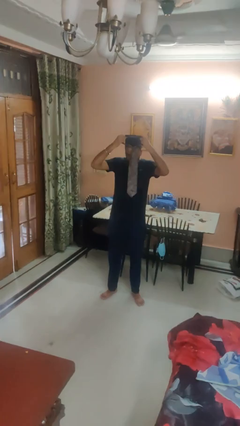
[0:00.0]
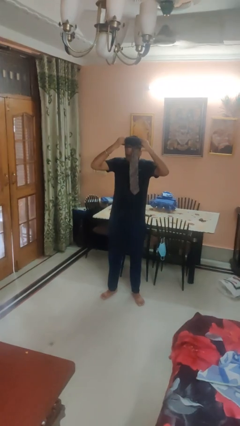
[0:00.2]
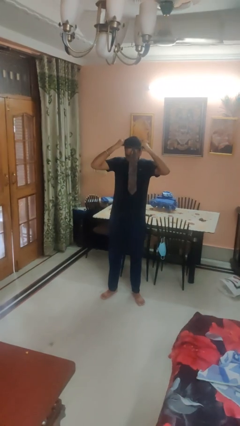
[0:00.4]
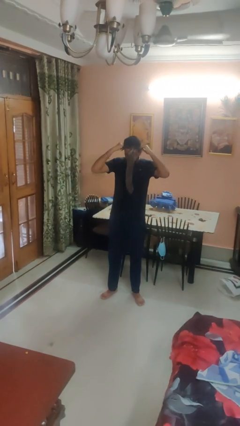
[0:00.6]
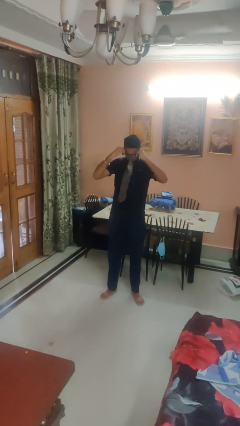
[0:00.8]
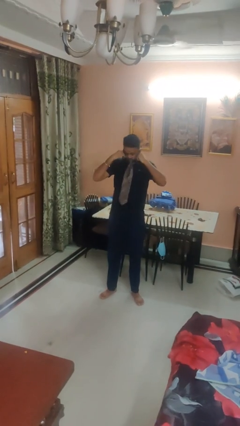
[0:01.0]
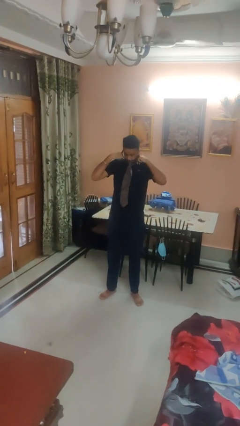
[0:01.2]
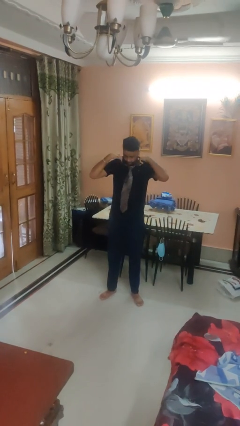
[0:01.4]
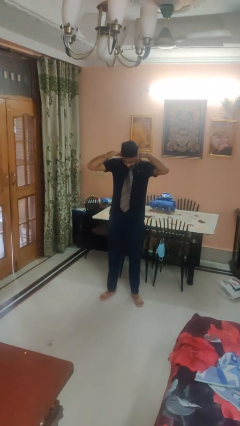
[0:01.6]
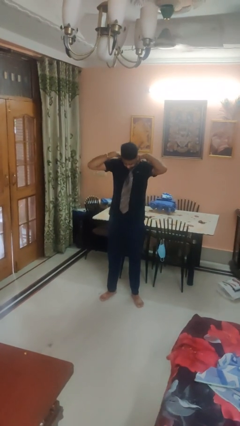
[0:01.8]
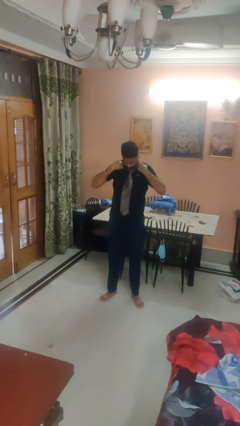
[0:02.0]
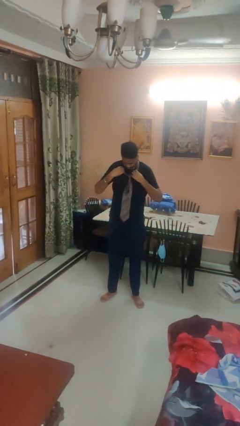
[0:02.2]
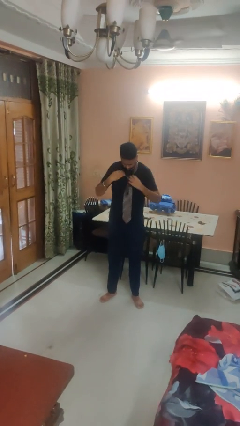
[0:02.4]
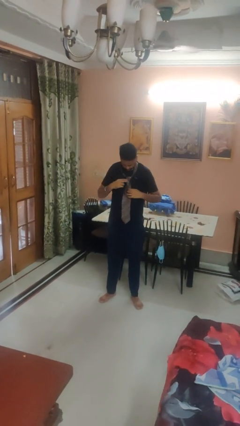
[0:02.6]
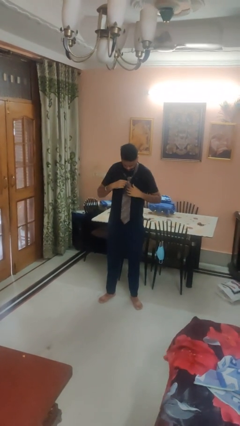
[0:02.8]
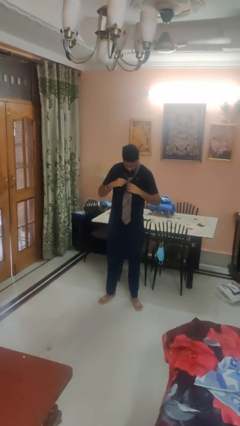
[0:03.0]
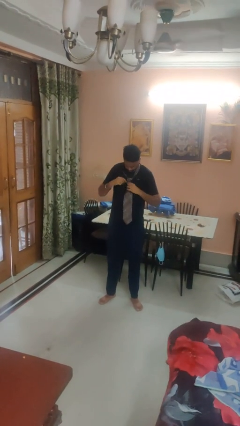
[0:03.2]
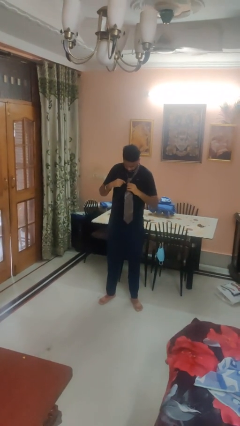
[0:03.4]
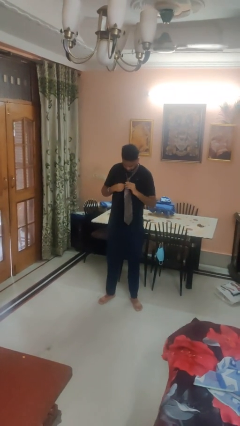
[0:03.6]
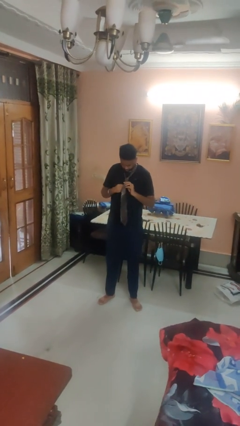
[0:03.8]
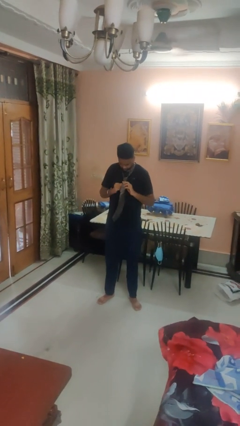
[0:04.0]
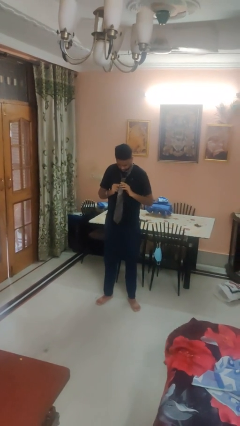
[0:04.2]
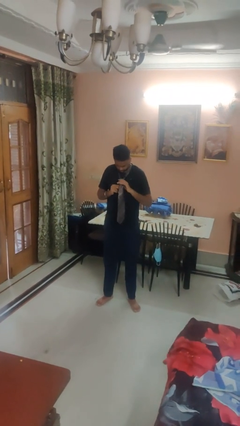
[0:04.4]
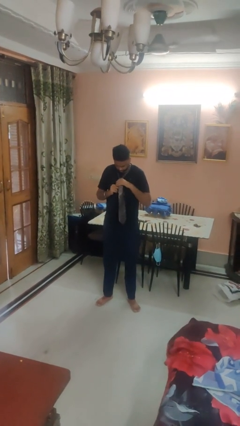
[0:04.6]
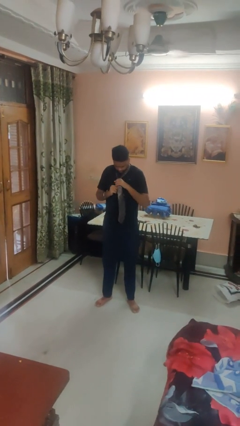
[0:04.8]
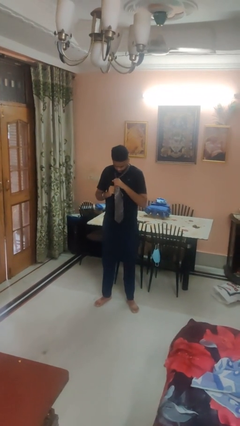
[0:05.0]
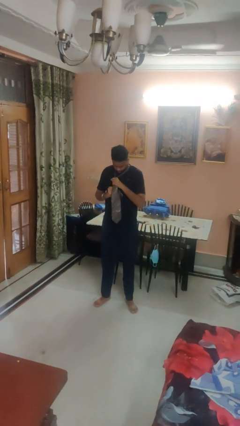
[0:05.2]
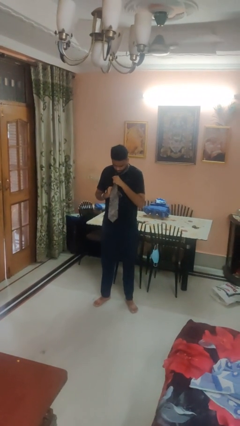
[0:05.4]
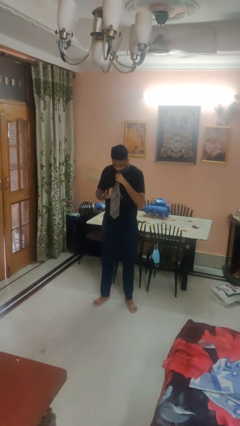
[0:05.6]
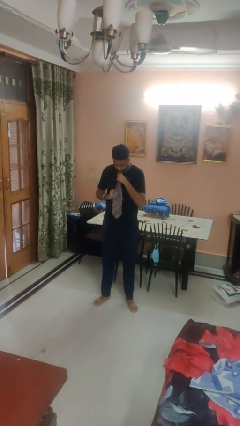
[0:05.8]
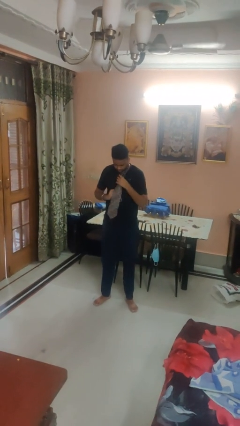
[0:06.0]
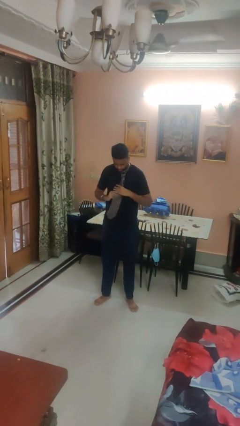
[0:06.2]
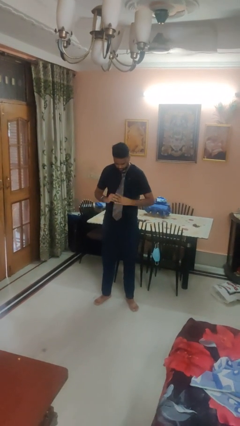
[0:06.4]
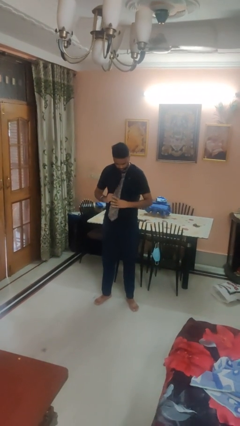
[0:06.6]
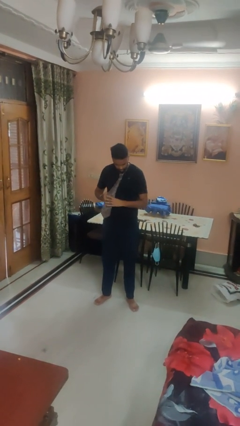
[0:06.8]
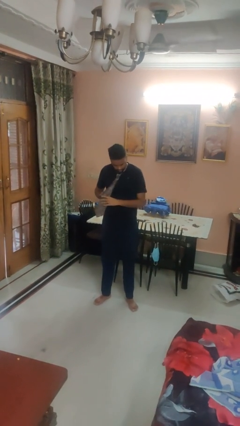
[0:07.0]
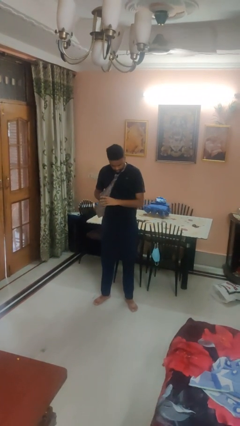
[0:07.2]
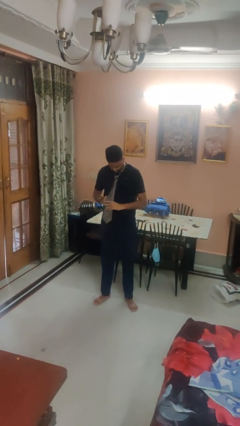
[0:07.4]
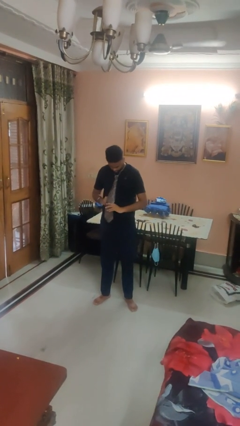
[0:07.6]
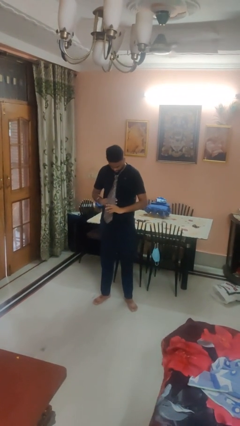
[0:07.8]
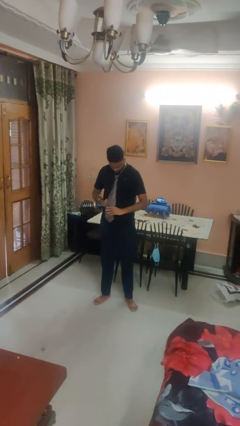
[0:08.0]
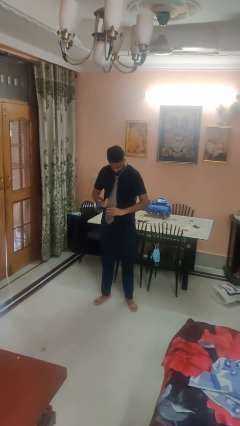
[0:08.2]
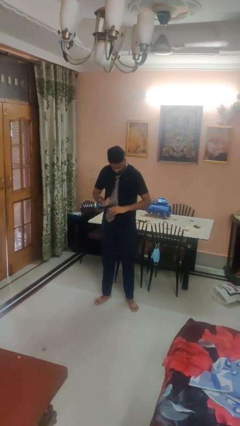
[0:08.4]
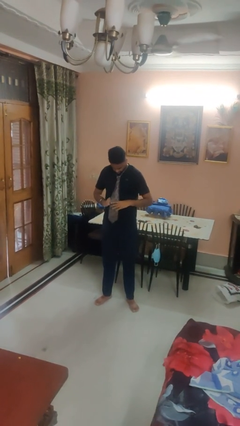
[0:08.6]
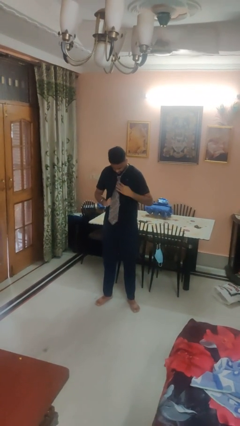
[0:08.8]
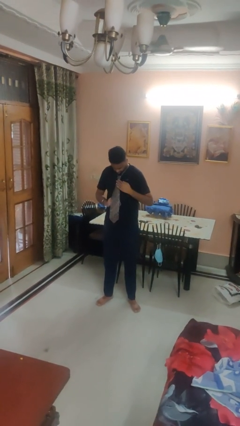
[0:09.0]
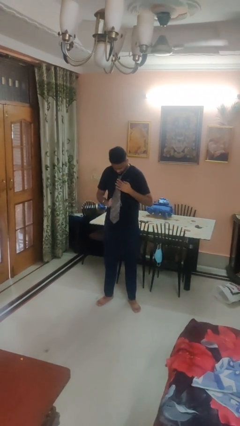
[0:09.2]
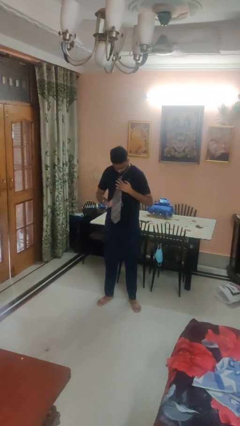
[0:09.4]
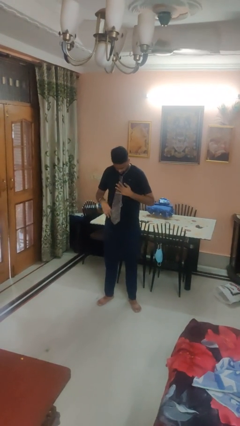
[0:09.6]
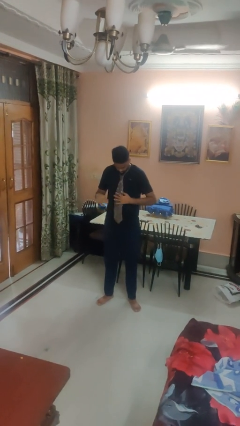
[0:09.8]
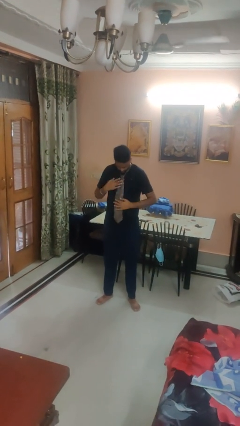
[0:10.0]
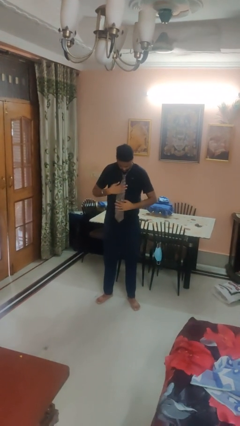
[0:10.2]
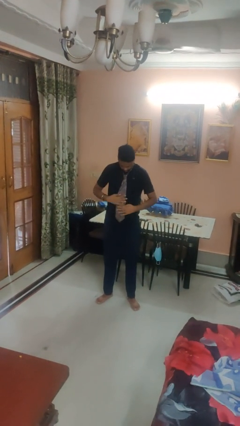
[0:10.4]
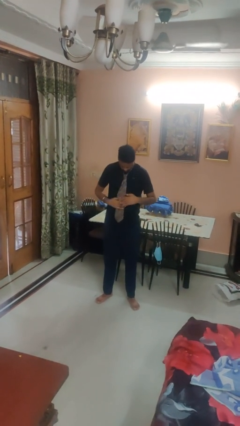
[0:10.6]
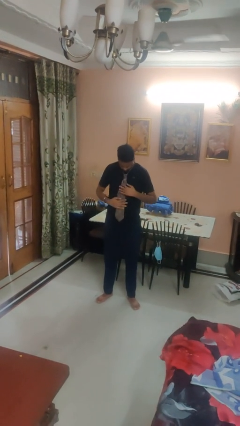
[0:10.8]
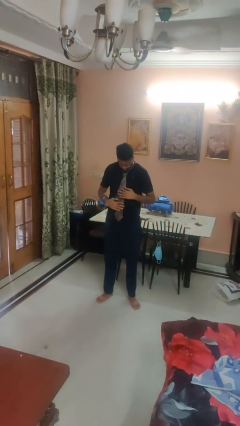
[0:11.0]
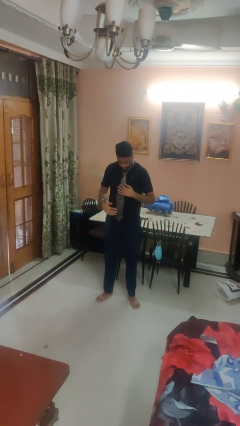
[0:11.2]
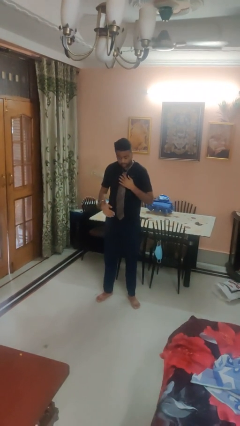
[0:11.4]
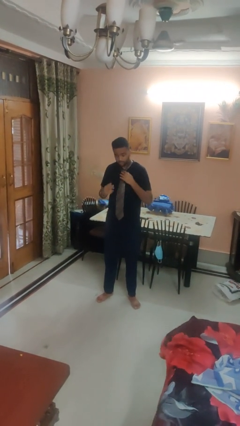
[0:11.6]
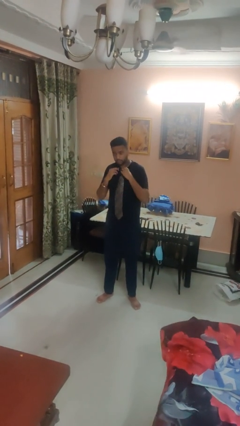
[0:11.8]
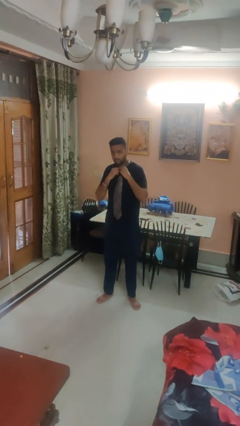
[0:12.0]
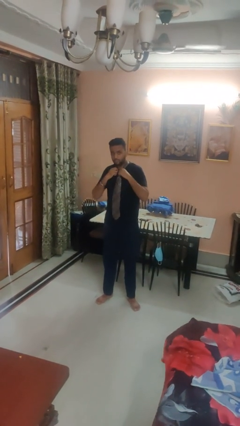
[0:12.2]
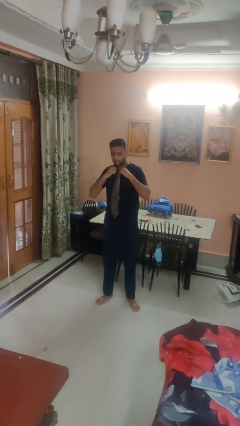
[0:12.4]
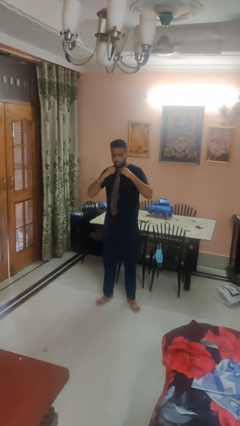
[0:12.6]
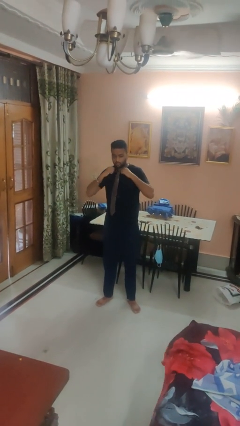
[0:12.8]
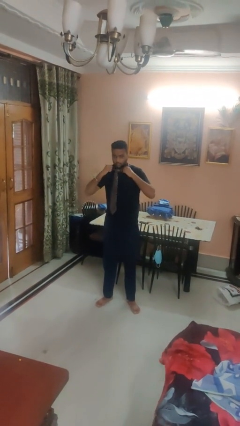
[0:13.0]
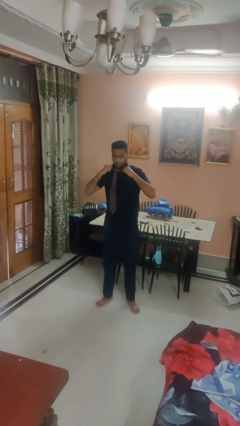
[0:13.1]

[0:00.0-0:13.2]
person puts on necktie

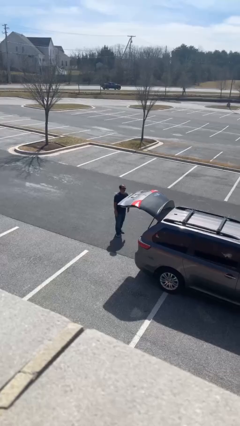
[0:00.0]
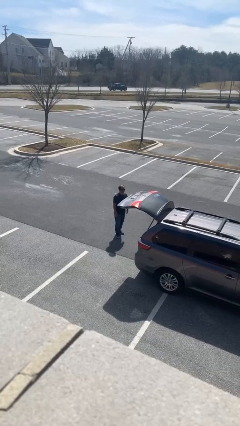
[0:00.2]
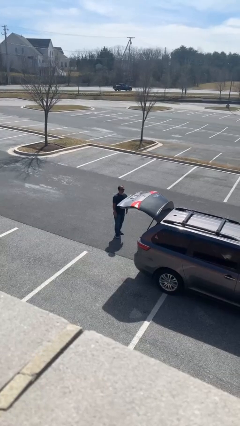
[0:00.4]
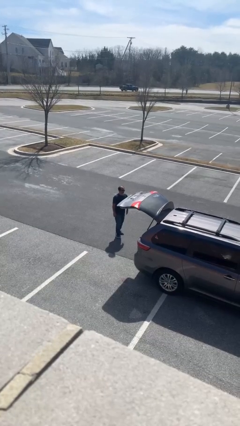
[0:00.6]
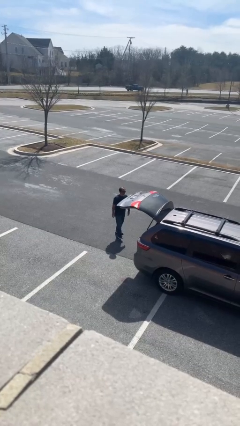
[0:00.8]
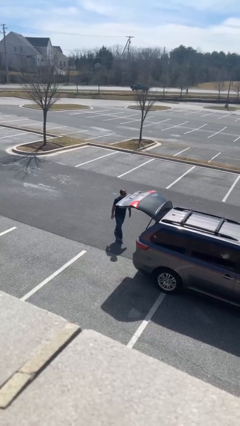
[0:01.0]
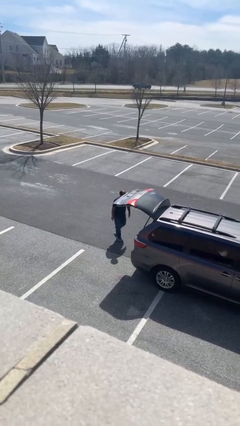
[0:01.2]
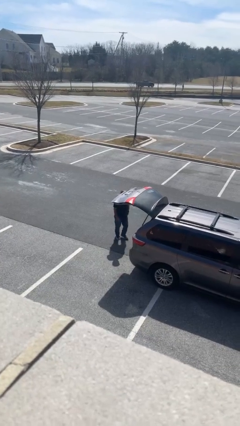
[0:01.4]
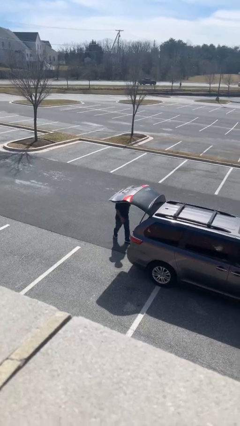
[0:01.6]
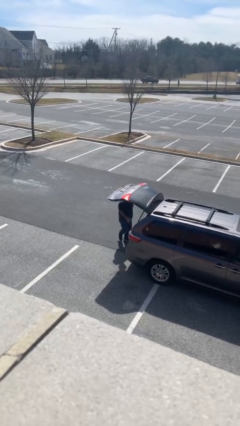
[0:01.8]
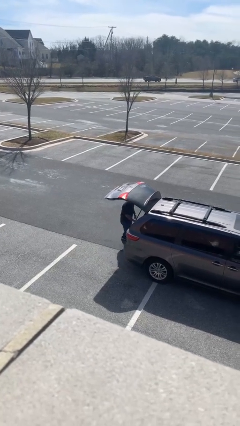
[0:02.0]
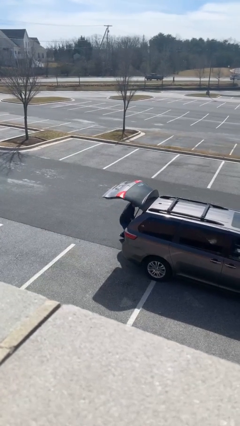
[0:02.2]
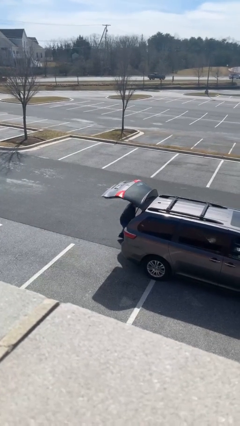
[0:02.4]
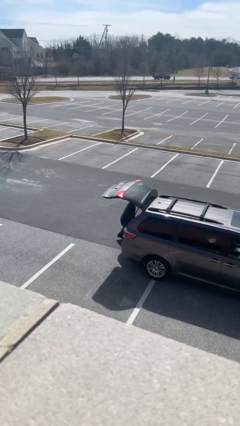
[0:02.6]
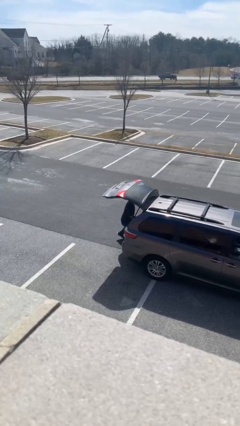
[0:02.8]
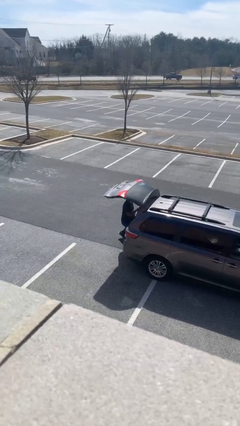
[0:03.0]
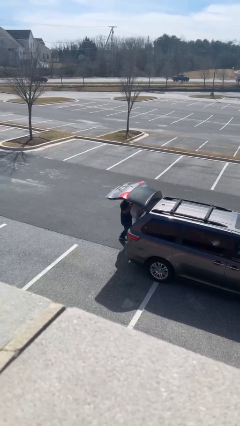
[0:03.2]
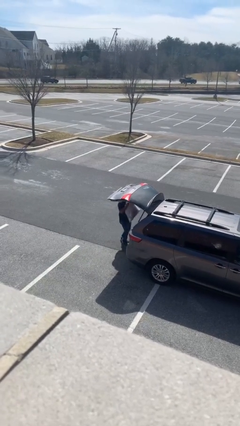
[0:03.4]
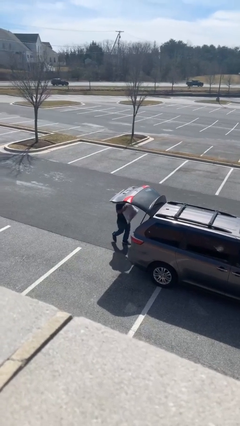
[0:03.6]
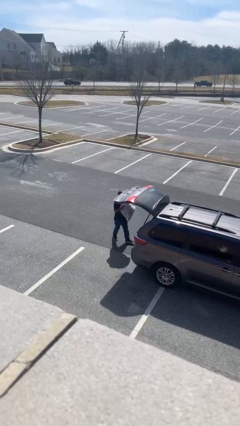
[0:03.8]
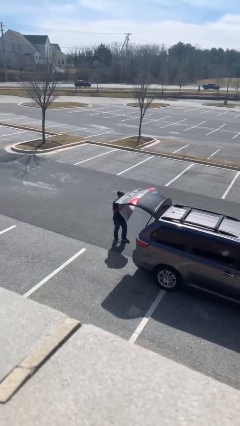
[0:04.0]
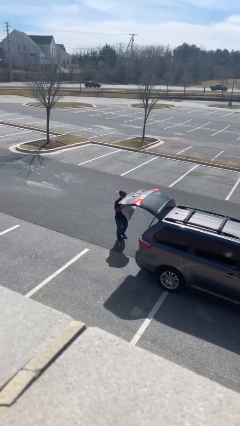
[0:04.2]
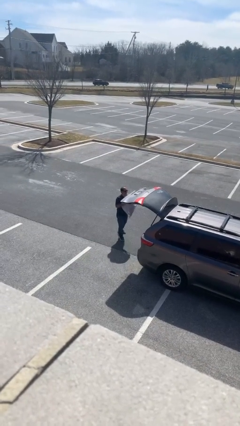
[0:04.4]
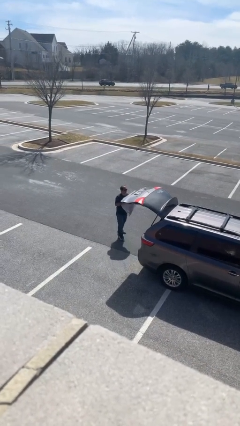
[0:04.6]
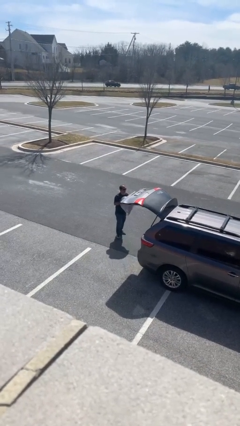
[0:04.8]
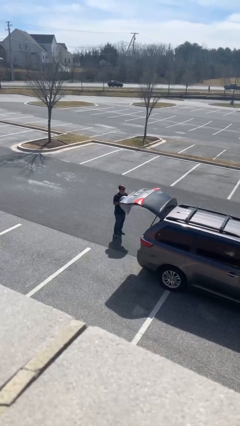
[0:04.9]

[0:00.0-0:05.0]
person unloads car
